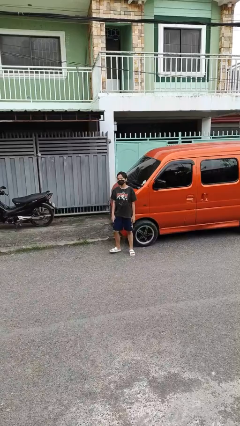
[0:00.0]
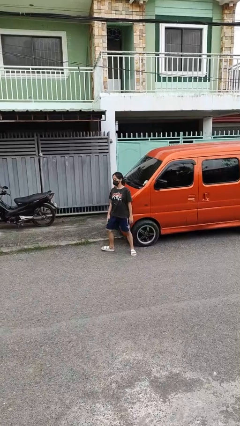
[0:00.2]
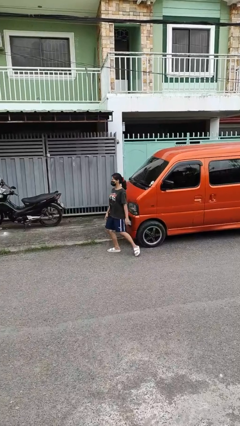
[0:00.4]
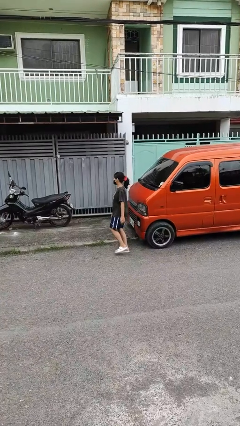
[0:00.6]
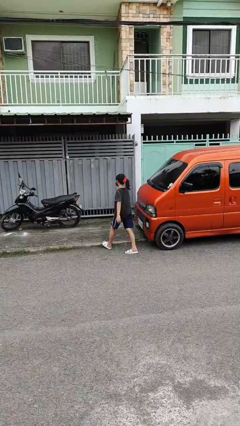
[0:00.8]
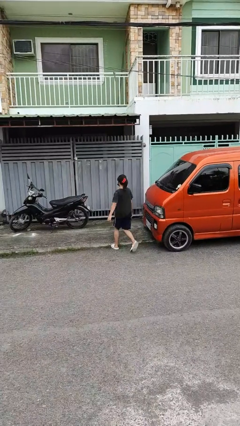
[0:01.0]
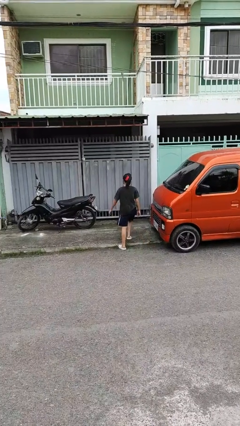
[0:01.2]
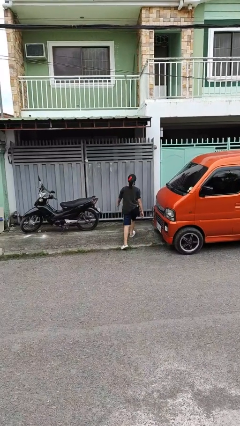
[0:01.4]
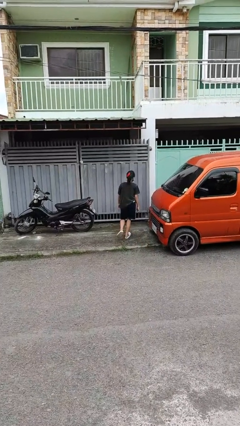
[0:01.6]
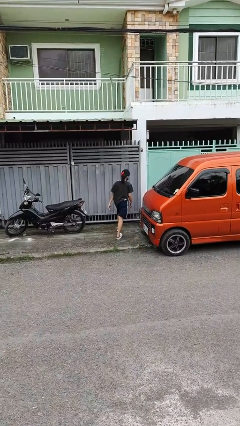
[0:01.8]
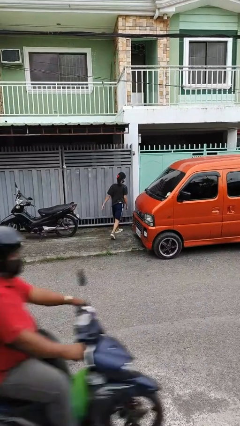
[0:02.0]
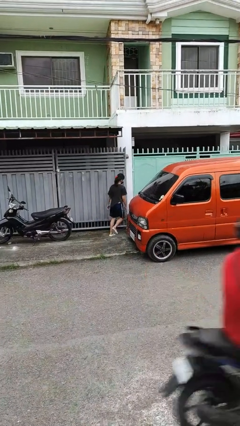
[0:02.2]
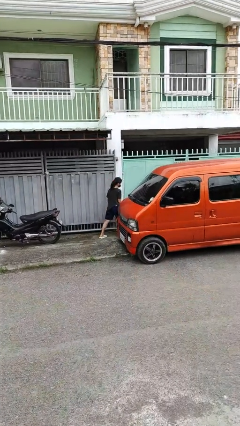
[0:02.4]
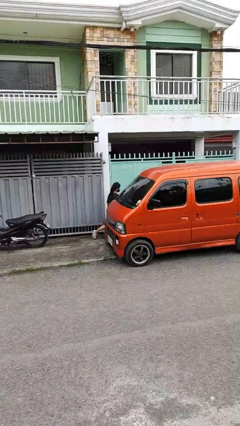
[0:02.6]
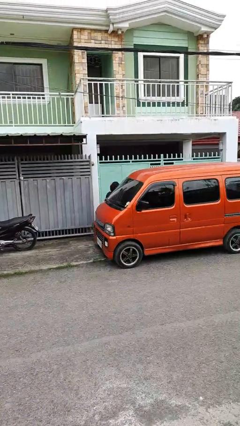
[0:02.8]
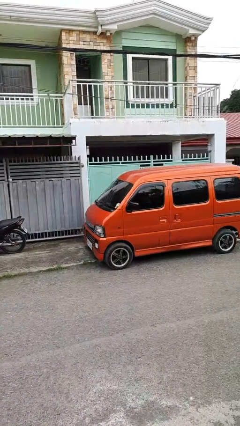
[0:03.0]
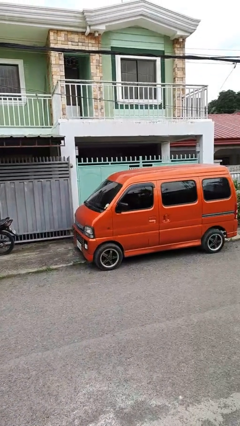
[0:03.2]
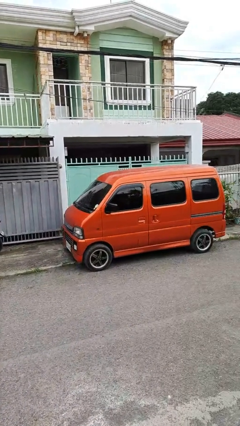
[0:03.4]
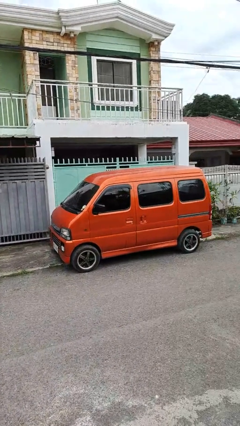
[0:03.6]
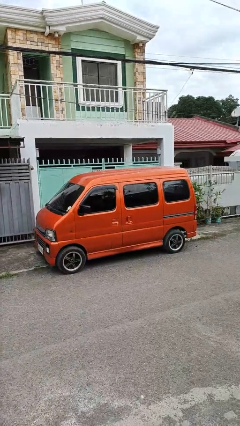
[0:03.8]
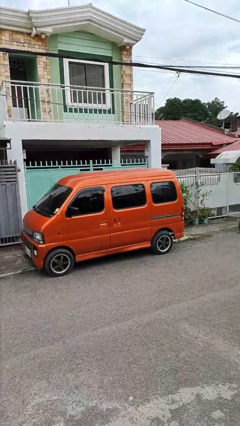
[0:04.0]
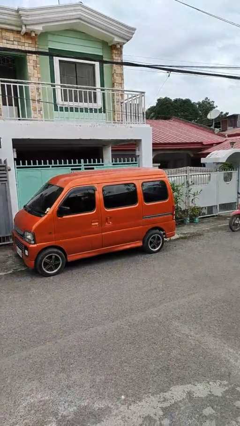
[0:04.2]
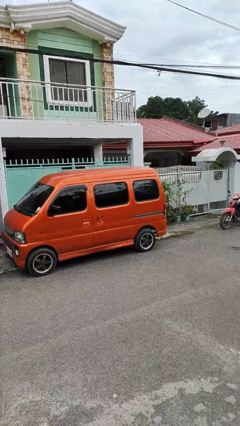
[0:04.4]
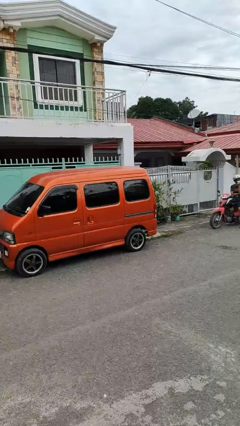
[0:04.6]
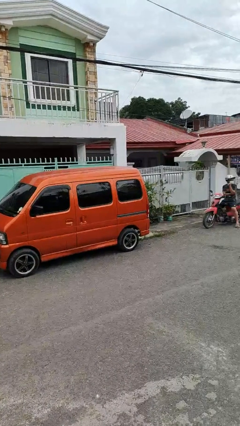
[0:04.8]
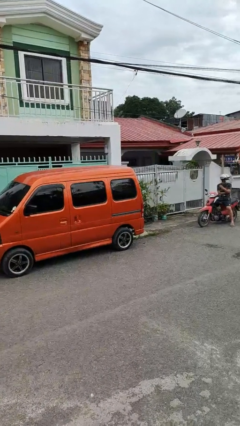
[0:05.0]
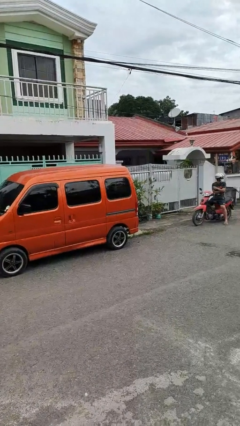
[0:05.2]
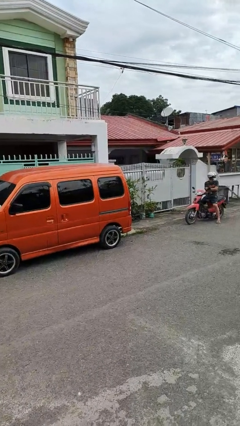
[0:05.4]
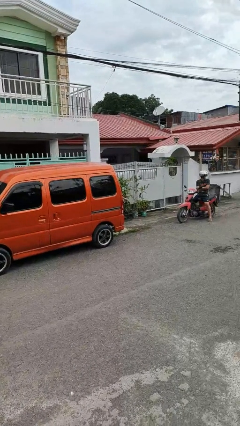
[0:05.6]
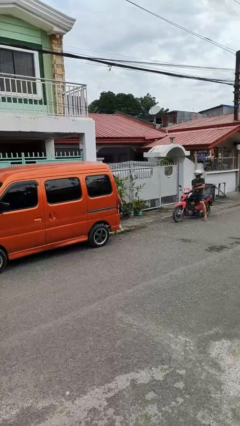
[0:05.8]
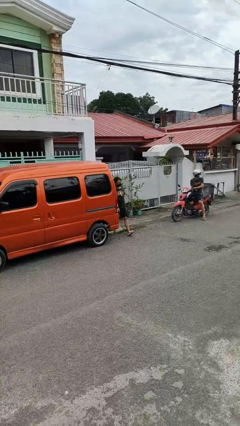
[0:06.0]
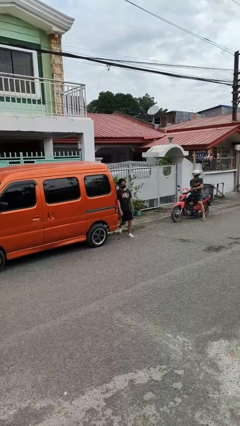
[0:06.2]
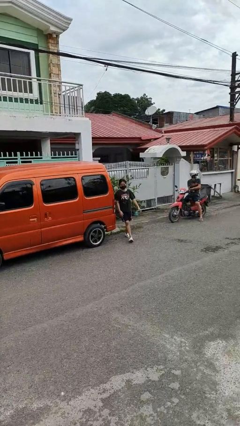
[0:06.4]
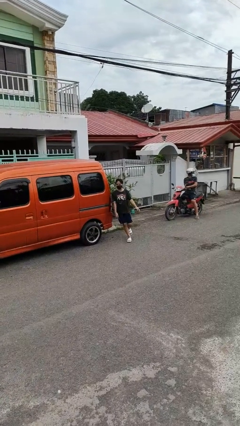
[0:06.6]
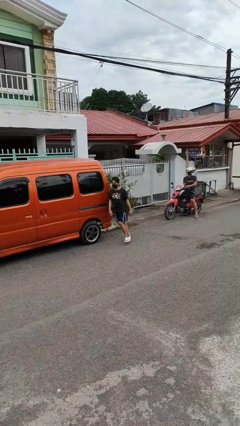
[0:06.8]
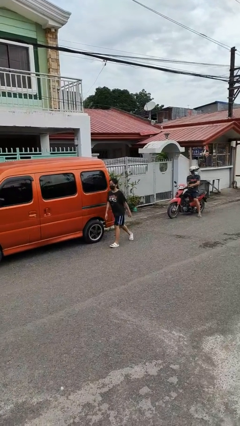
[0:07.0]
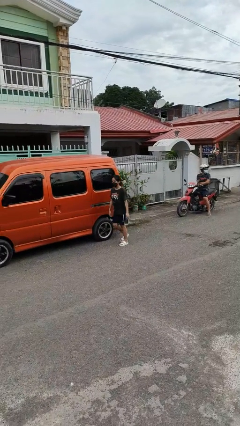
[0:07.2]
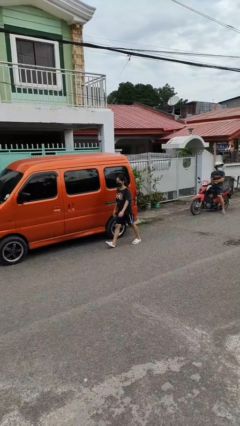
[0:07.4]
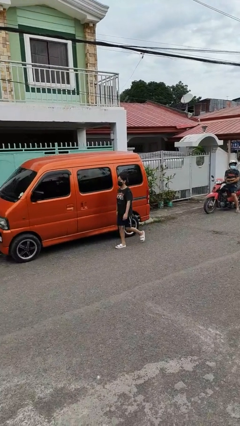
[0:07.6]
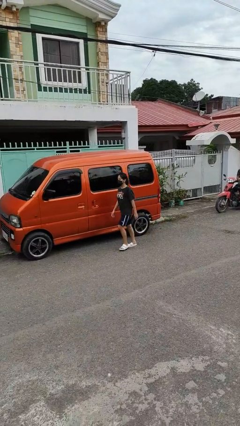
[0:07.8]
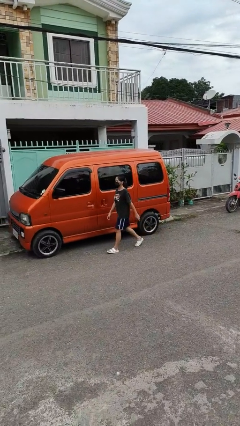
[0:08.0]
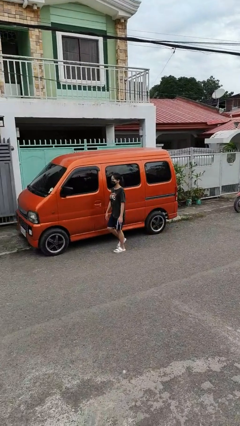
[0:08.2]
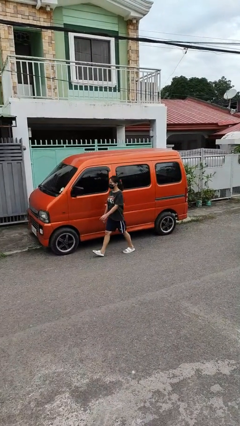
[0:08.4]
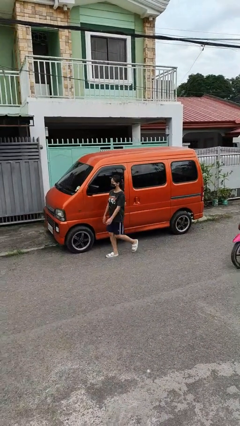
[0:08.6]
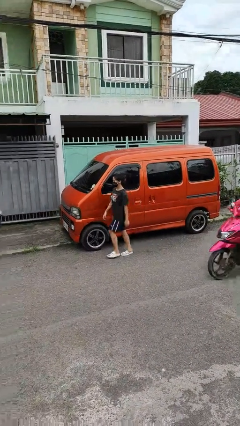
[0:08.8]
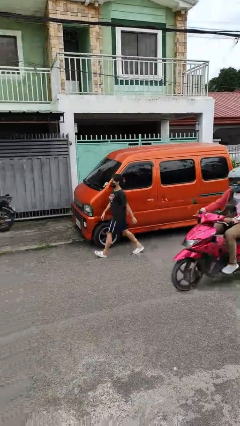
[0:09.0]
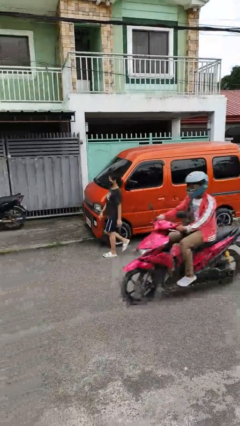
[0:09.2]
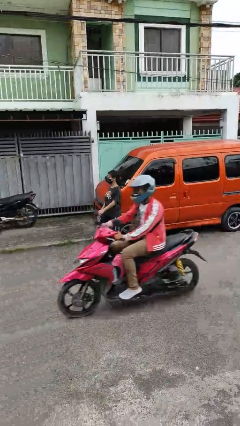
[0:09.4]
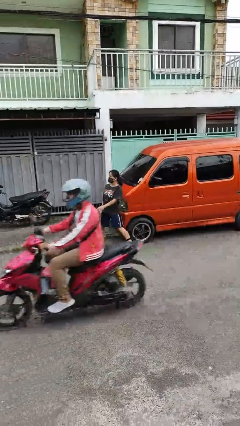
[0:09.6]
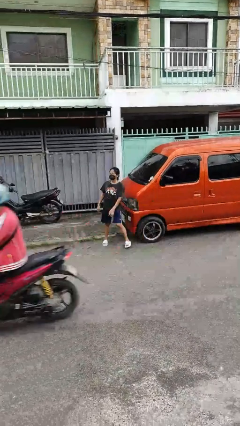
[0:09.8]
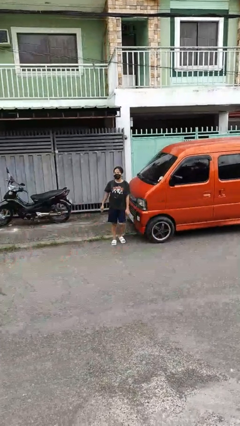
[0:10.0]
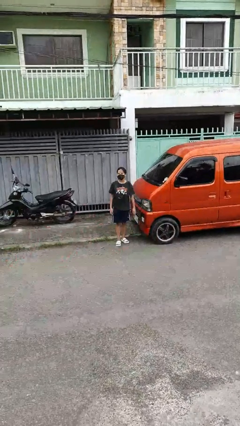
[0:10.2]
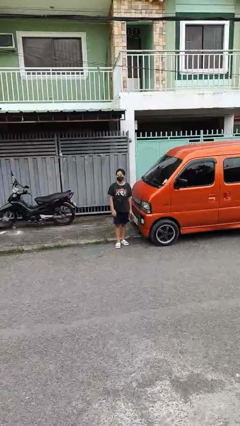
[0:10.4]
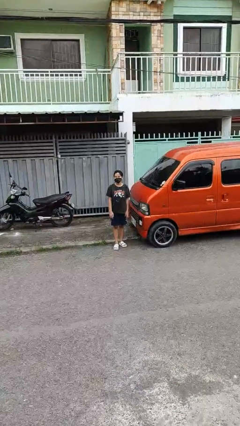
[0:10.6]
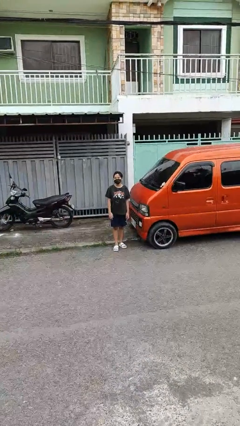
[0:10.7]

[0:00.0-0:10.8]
person walks around car

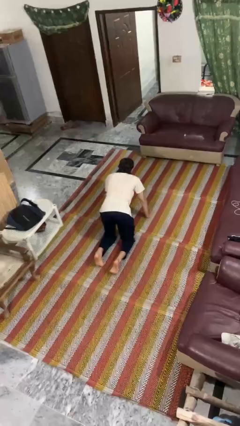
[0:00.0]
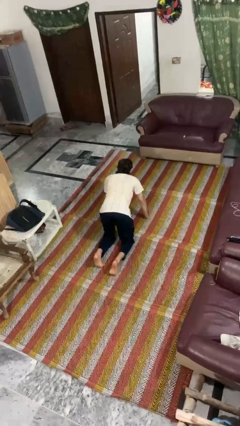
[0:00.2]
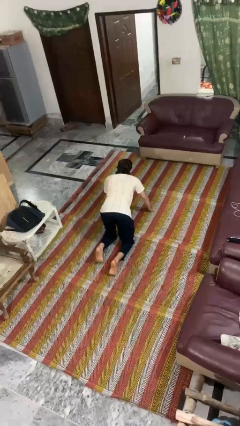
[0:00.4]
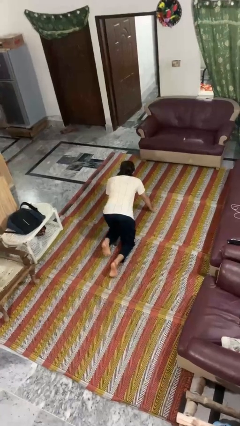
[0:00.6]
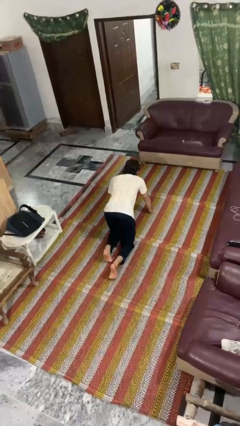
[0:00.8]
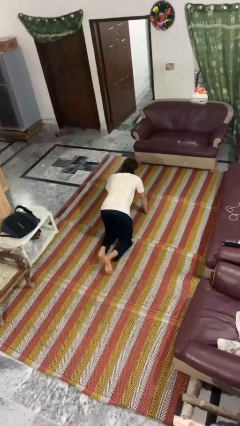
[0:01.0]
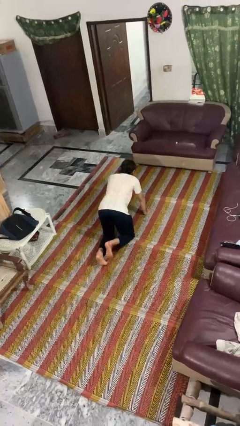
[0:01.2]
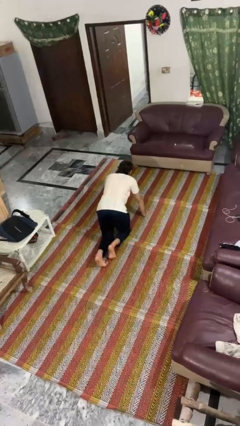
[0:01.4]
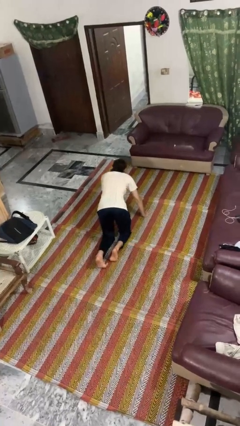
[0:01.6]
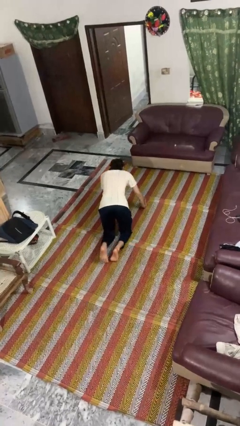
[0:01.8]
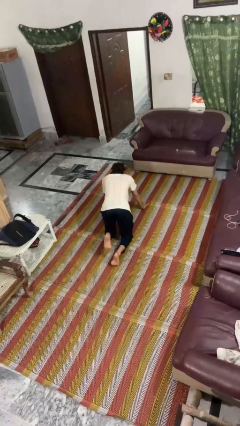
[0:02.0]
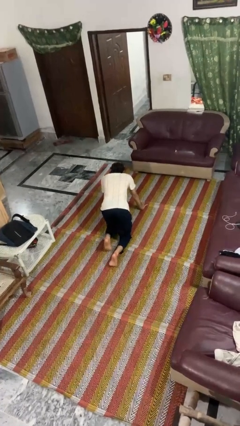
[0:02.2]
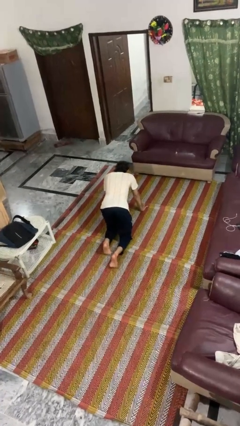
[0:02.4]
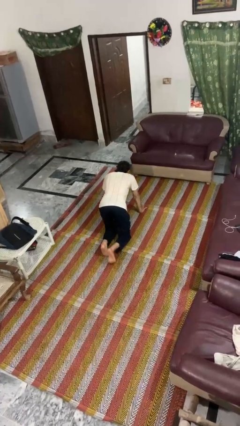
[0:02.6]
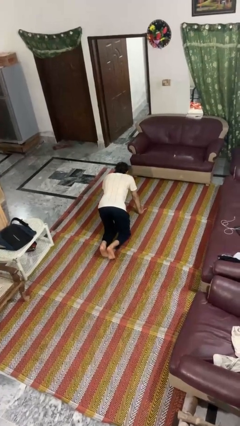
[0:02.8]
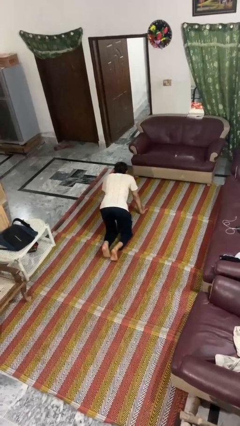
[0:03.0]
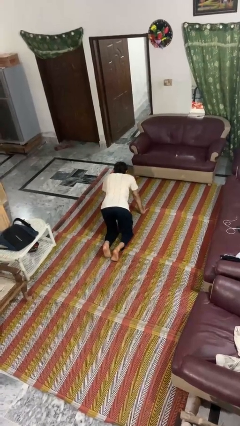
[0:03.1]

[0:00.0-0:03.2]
person crawls

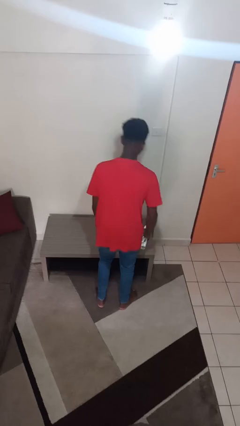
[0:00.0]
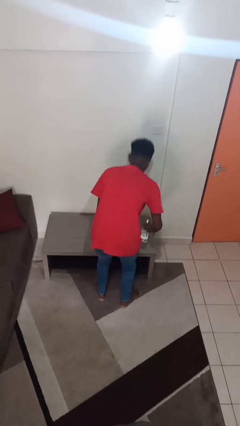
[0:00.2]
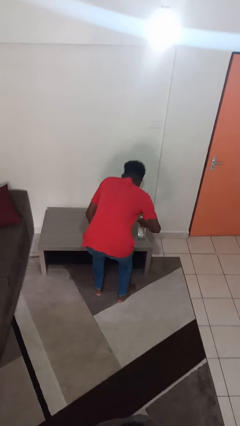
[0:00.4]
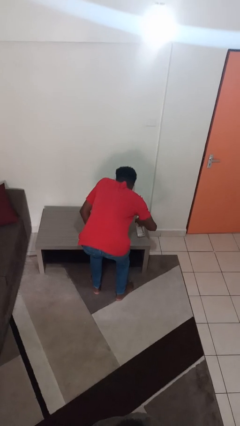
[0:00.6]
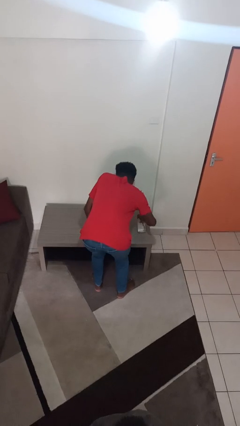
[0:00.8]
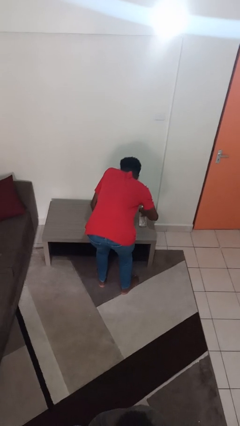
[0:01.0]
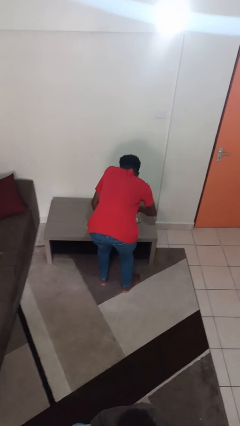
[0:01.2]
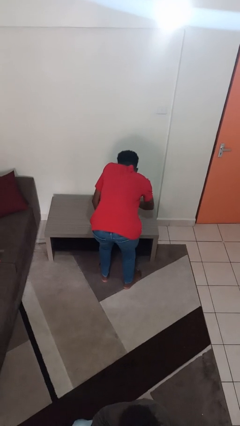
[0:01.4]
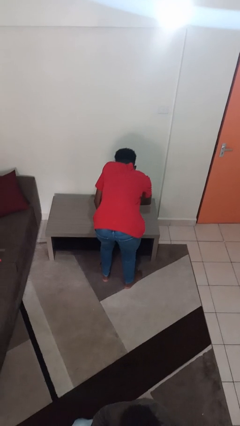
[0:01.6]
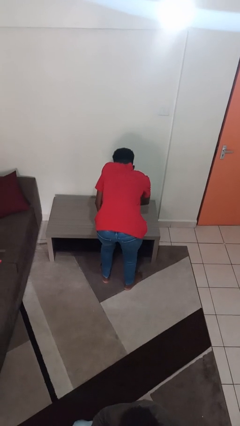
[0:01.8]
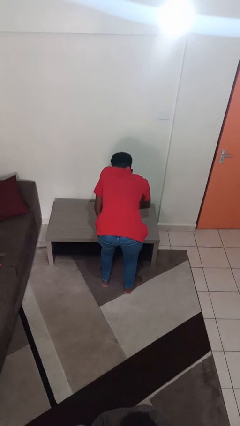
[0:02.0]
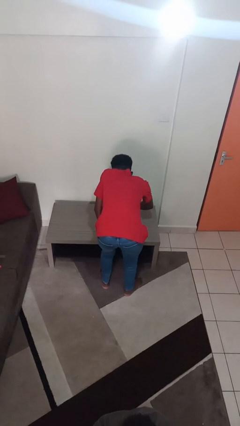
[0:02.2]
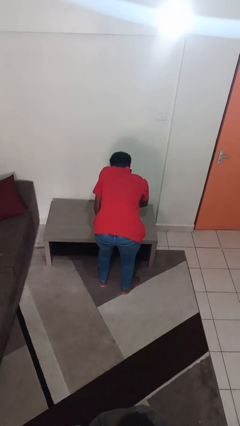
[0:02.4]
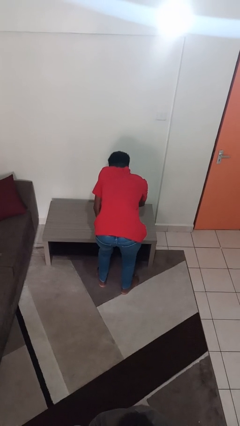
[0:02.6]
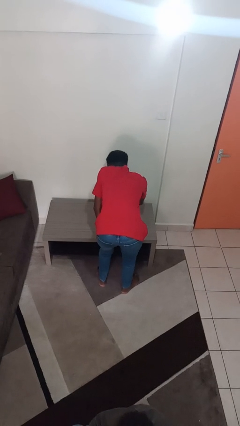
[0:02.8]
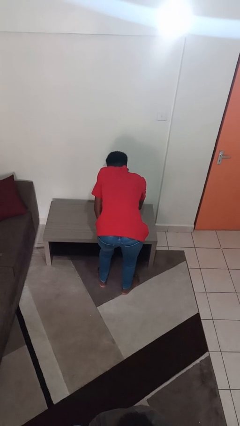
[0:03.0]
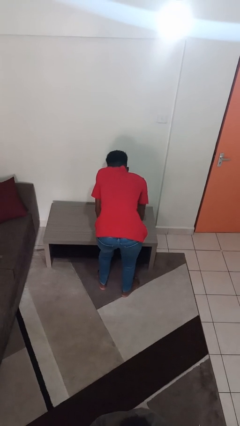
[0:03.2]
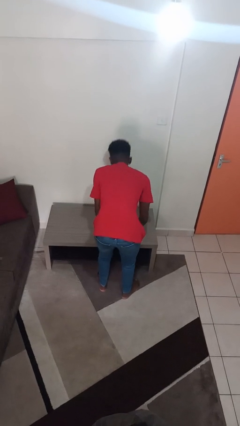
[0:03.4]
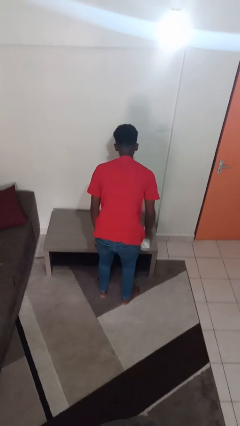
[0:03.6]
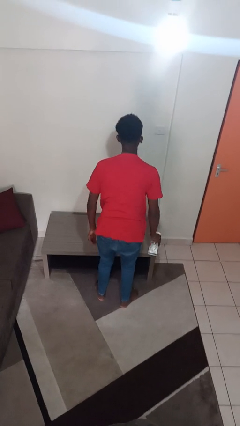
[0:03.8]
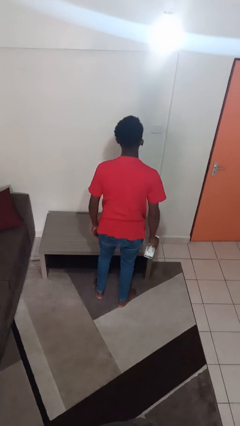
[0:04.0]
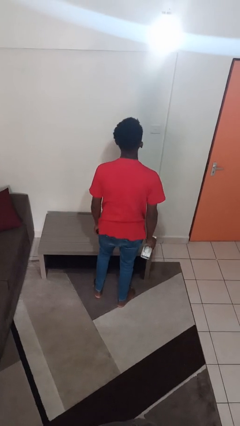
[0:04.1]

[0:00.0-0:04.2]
person sprays from bottle
